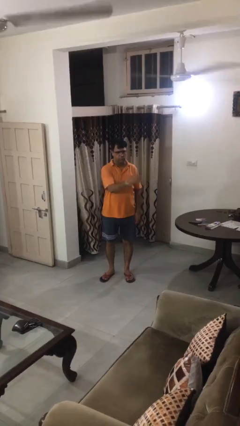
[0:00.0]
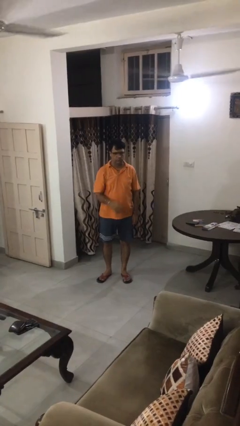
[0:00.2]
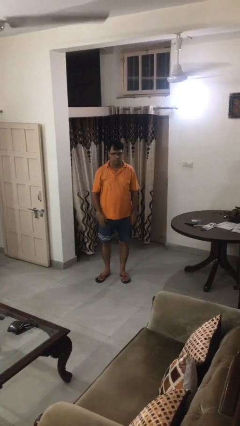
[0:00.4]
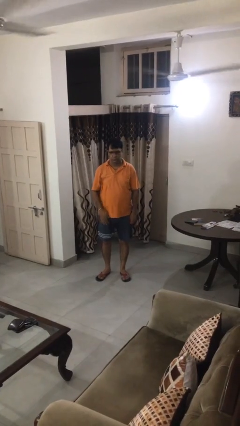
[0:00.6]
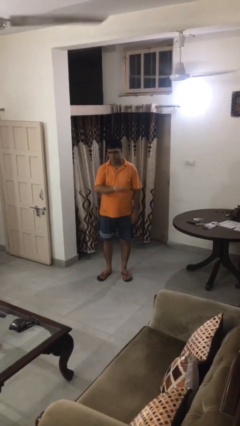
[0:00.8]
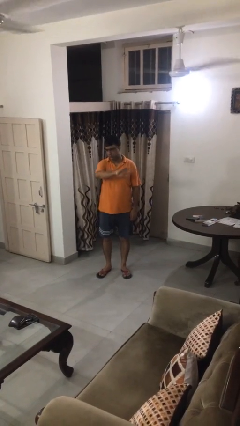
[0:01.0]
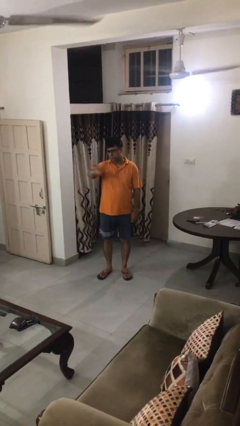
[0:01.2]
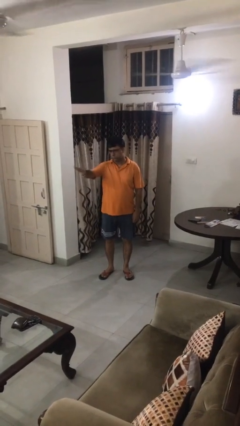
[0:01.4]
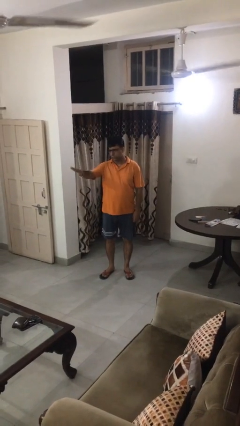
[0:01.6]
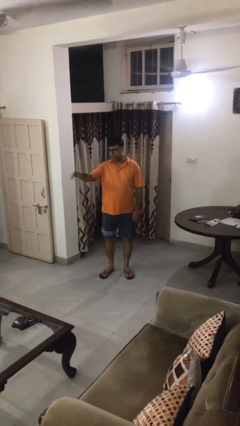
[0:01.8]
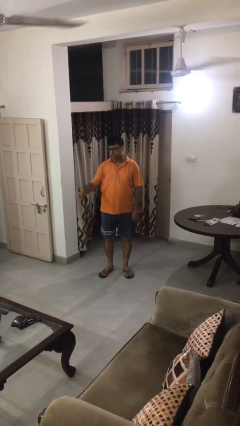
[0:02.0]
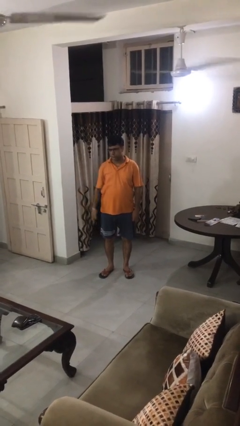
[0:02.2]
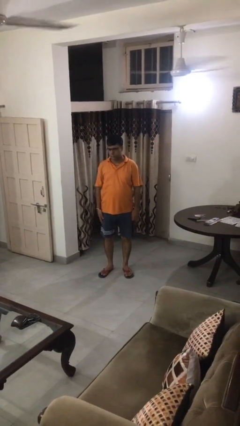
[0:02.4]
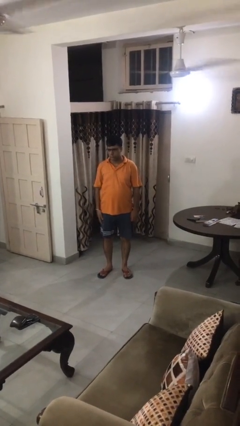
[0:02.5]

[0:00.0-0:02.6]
person gestures swipe right

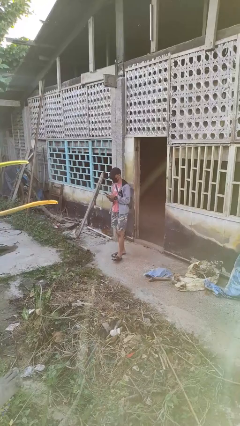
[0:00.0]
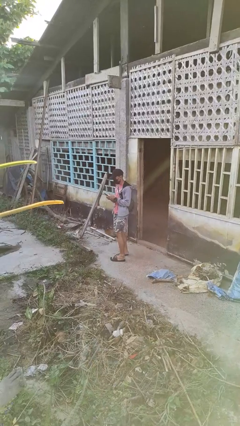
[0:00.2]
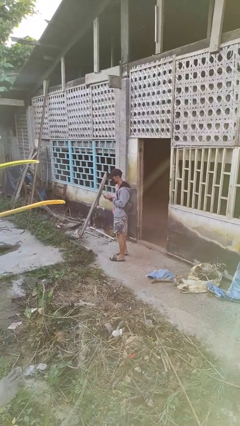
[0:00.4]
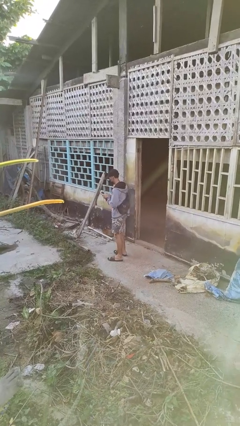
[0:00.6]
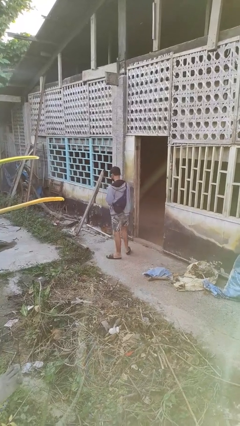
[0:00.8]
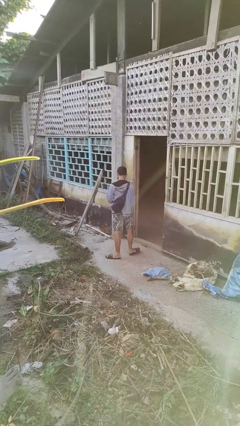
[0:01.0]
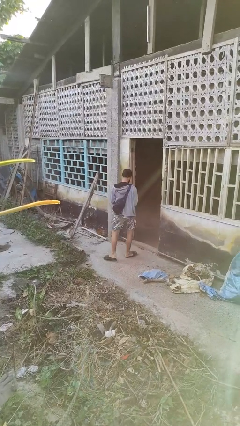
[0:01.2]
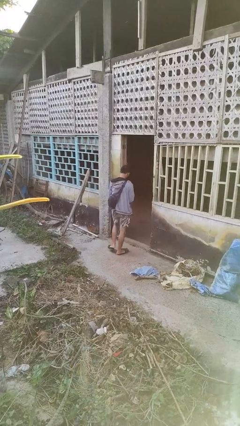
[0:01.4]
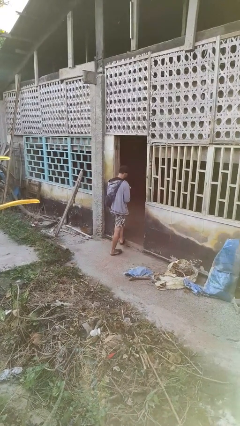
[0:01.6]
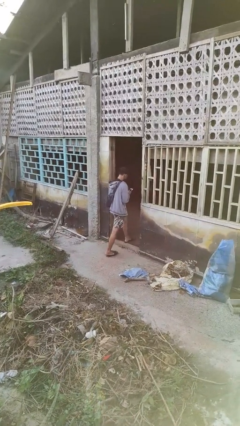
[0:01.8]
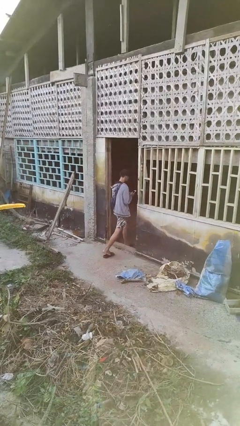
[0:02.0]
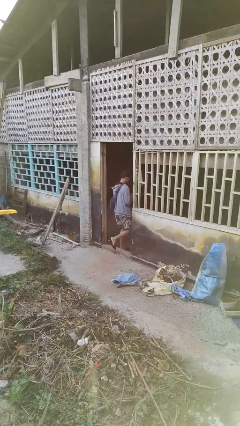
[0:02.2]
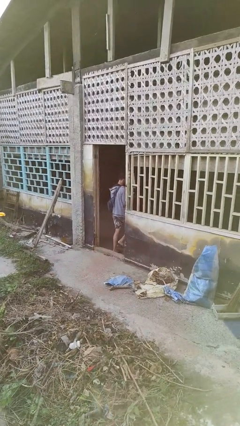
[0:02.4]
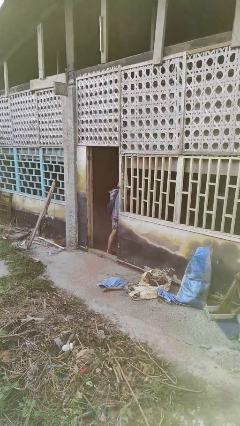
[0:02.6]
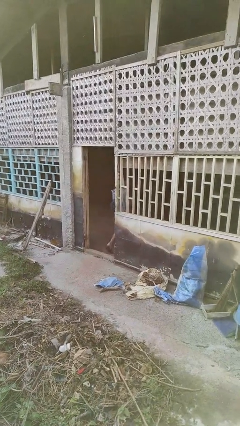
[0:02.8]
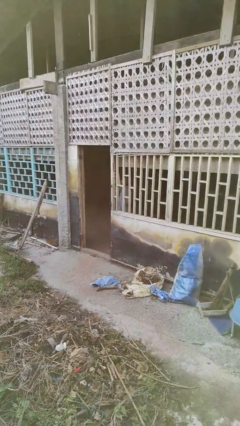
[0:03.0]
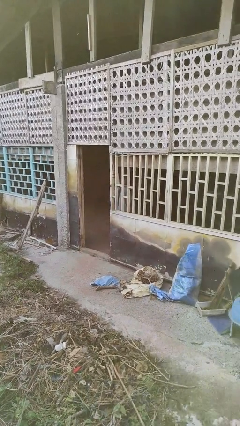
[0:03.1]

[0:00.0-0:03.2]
person exits scene through structure

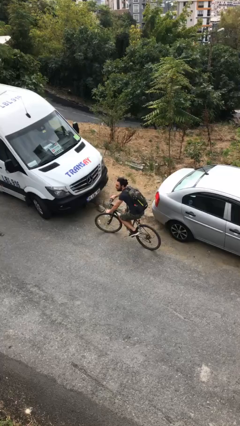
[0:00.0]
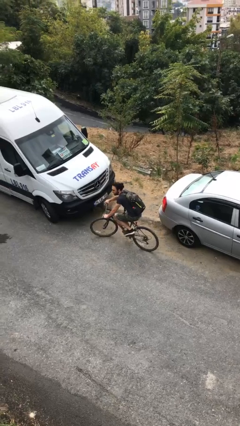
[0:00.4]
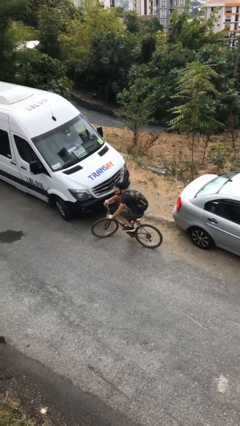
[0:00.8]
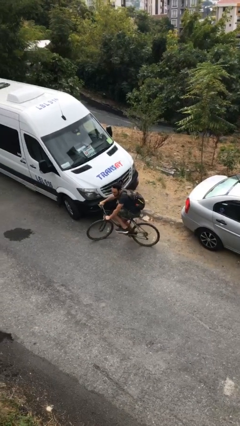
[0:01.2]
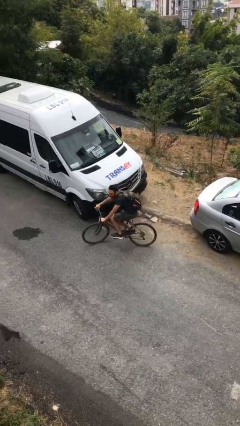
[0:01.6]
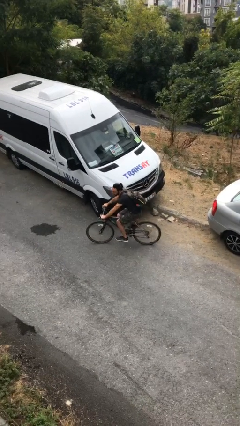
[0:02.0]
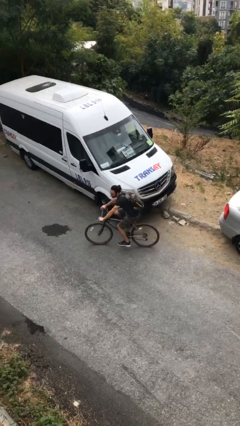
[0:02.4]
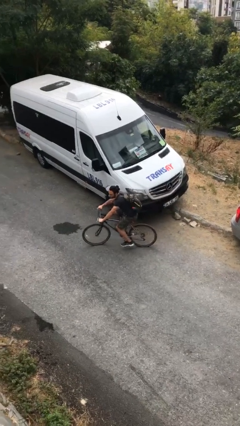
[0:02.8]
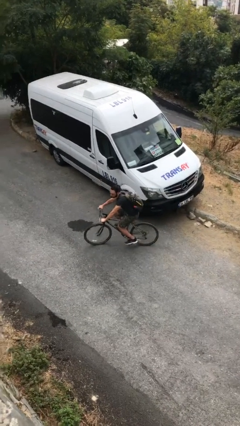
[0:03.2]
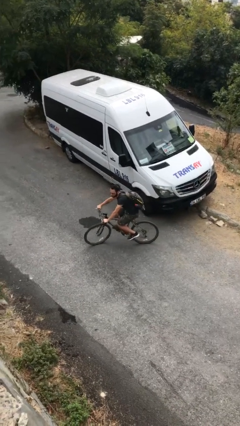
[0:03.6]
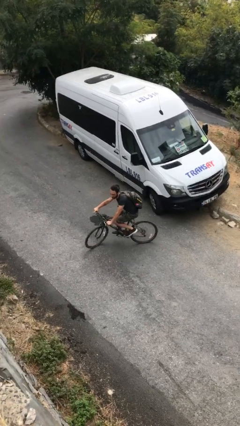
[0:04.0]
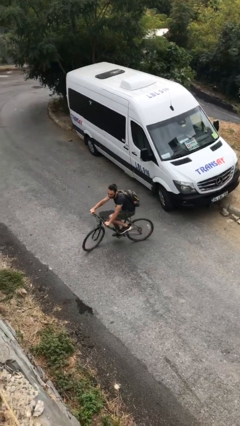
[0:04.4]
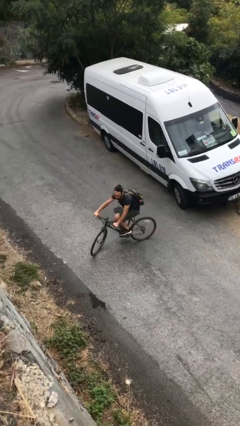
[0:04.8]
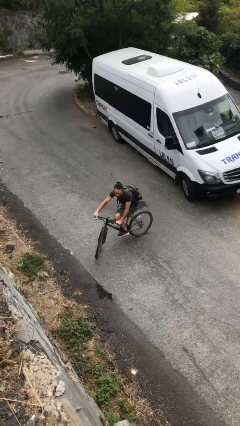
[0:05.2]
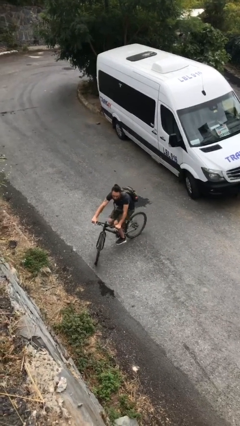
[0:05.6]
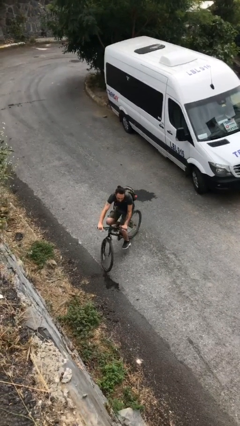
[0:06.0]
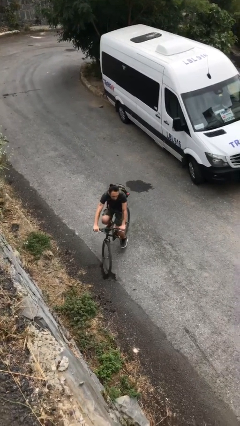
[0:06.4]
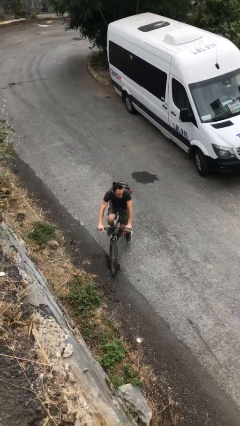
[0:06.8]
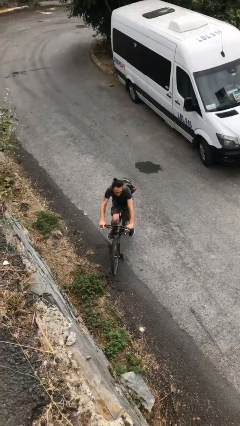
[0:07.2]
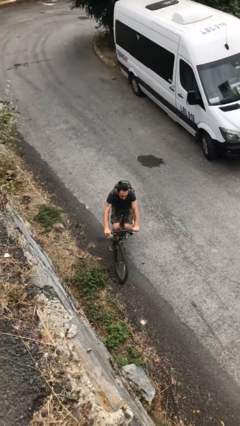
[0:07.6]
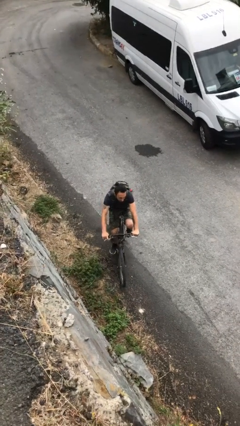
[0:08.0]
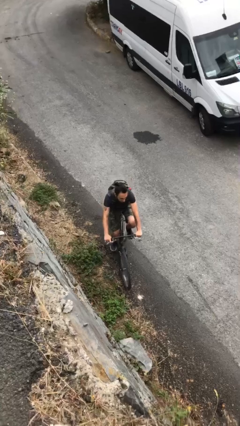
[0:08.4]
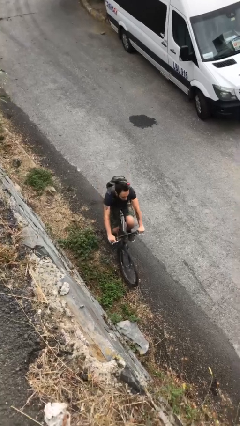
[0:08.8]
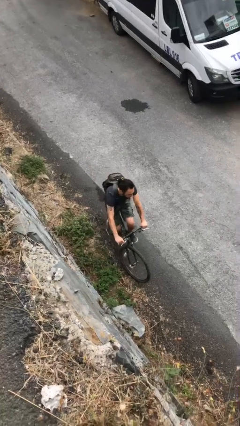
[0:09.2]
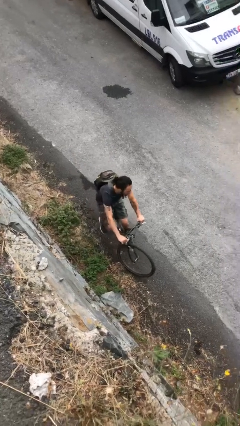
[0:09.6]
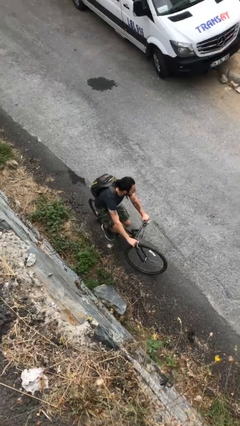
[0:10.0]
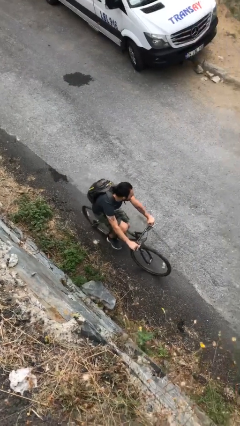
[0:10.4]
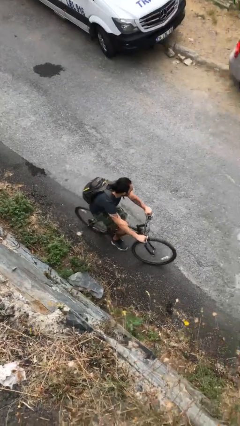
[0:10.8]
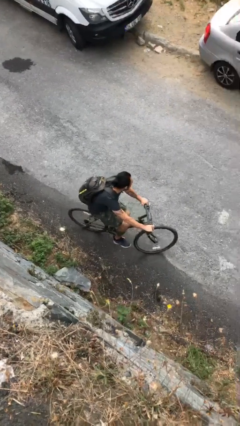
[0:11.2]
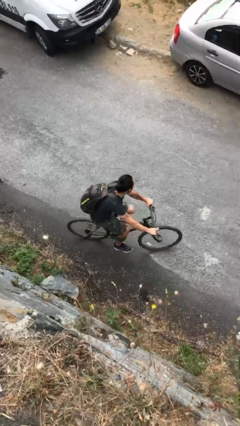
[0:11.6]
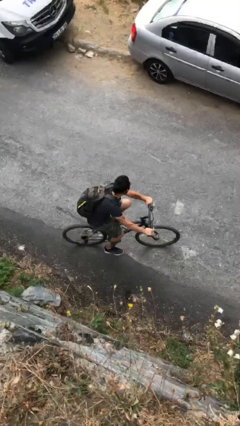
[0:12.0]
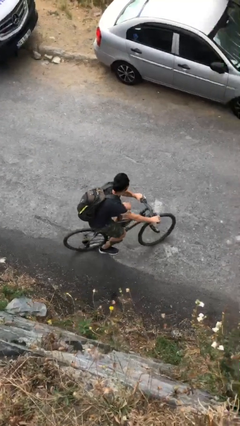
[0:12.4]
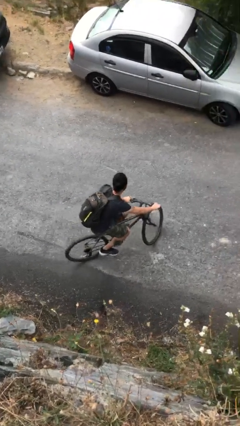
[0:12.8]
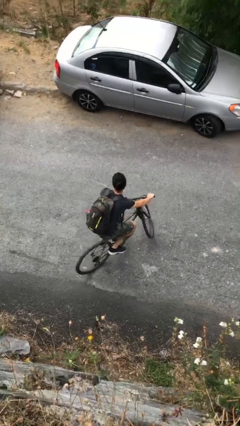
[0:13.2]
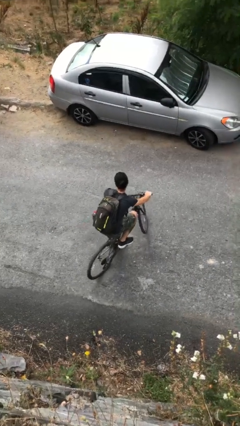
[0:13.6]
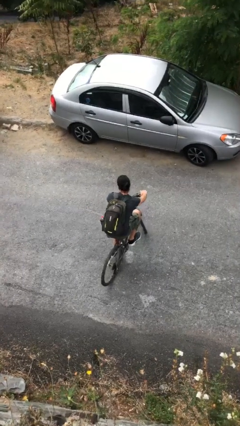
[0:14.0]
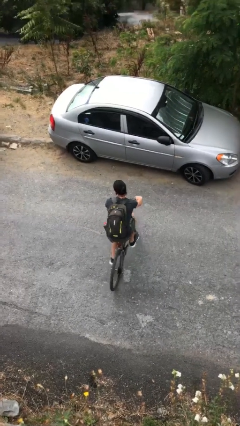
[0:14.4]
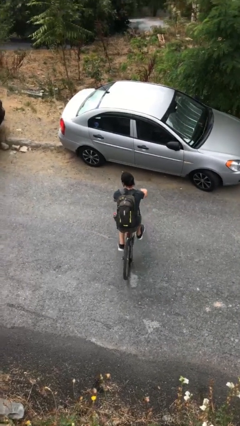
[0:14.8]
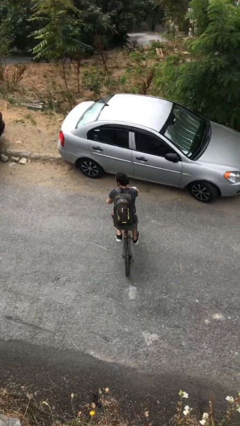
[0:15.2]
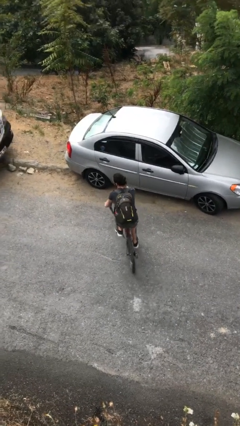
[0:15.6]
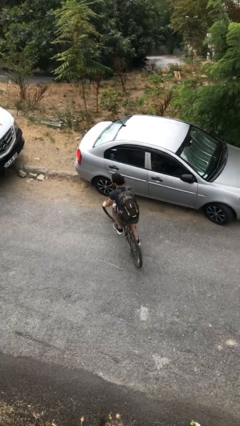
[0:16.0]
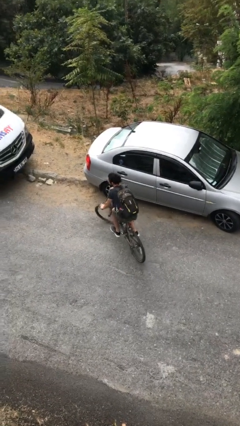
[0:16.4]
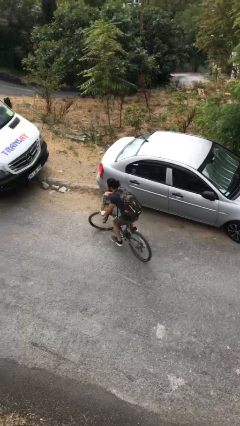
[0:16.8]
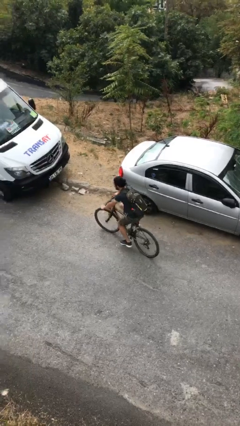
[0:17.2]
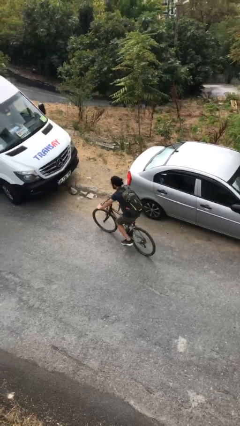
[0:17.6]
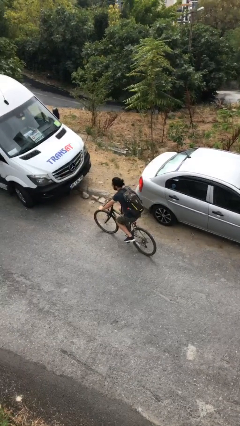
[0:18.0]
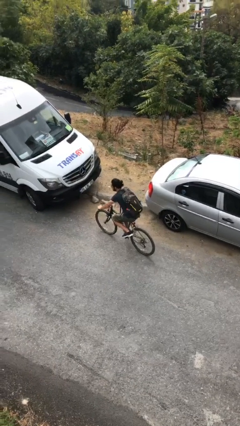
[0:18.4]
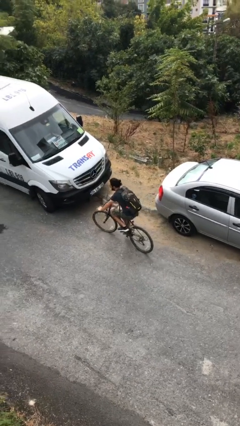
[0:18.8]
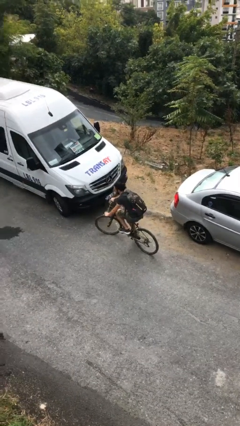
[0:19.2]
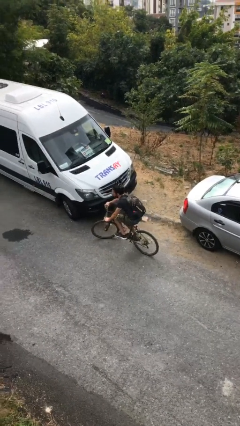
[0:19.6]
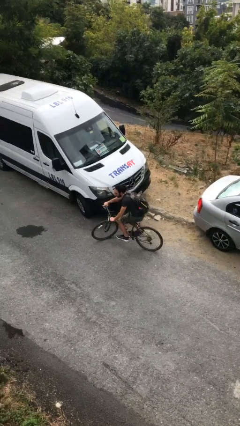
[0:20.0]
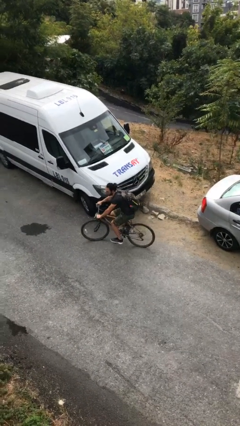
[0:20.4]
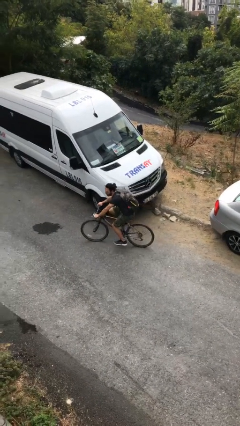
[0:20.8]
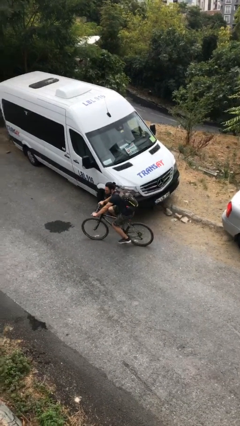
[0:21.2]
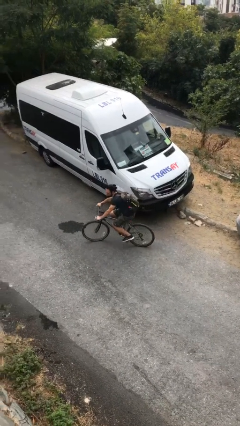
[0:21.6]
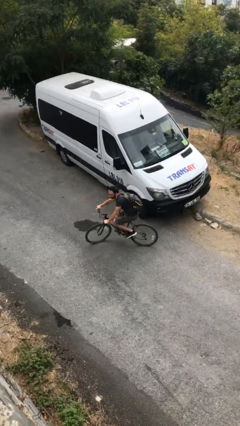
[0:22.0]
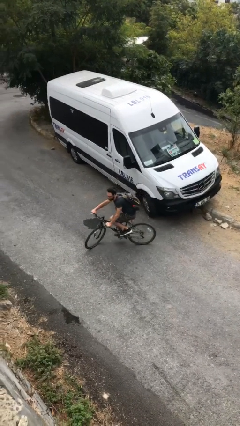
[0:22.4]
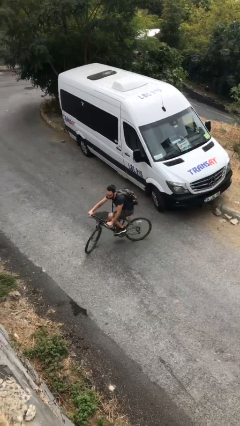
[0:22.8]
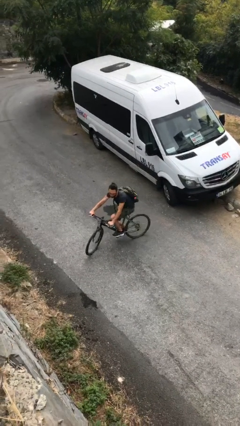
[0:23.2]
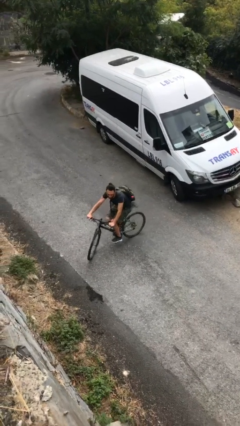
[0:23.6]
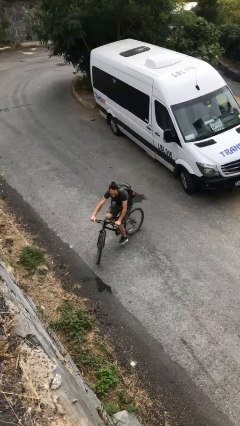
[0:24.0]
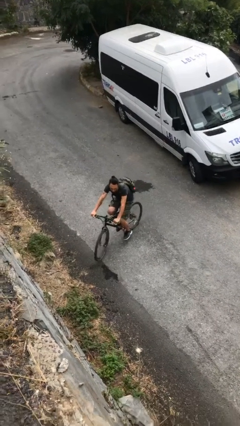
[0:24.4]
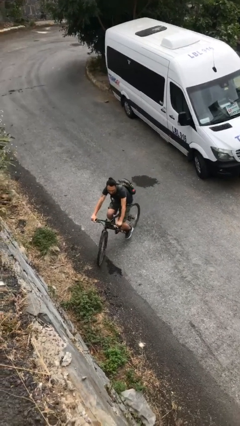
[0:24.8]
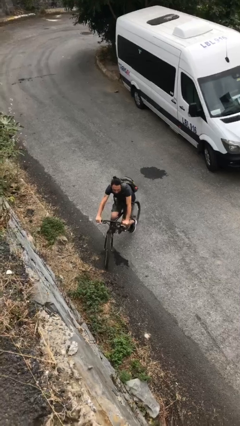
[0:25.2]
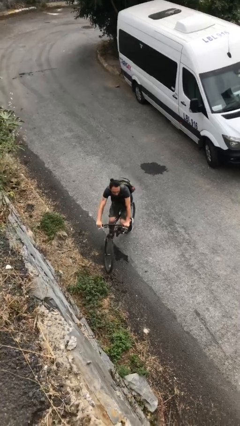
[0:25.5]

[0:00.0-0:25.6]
person rides bicycle
